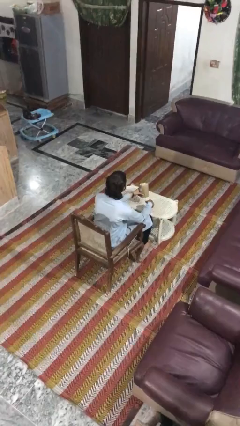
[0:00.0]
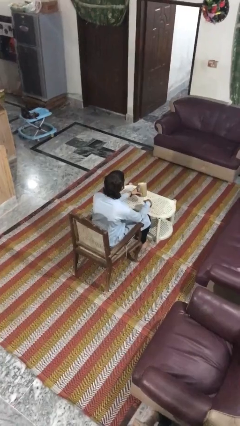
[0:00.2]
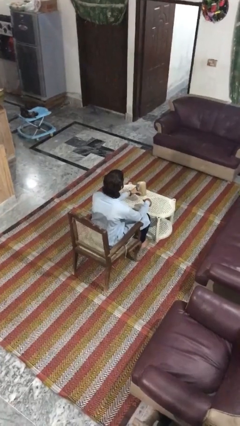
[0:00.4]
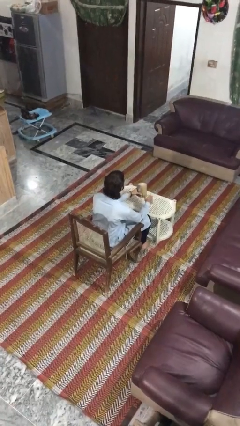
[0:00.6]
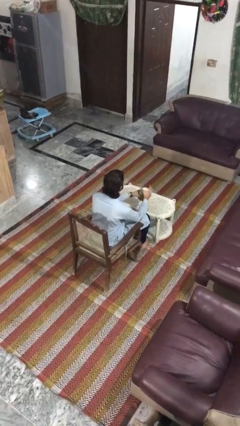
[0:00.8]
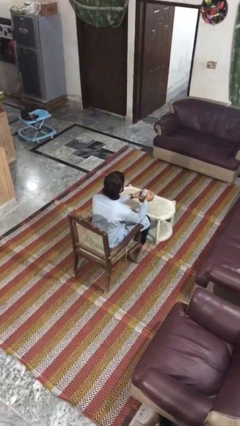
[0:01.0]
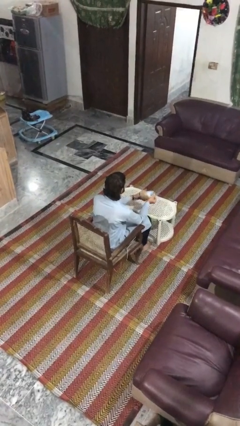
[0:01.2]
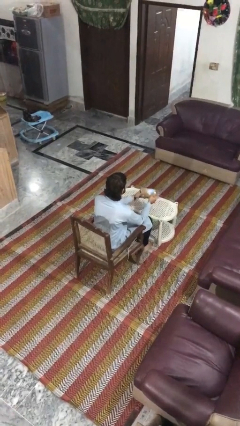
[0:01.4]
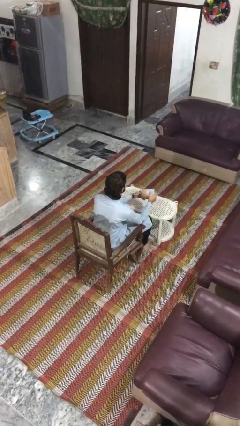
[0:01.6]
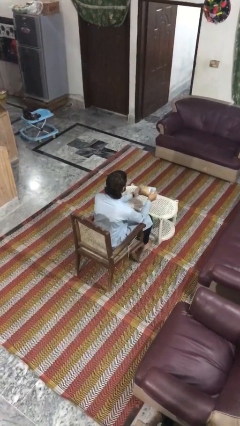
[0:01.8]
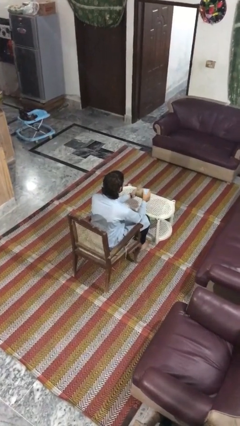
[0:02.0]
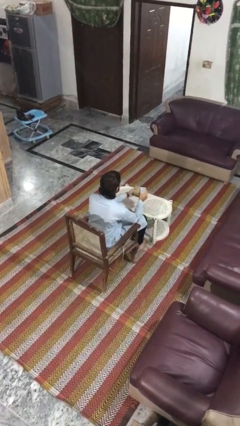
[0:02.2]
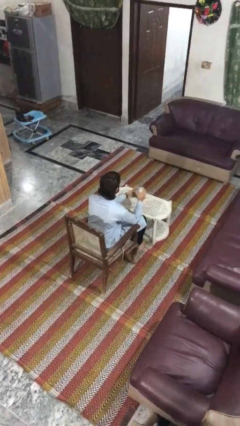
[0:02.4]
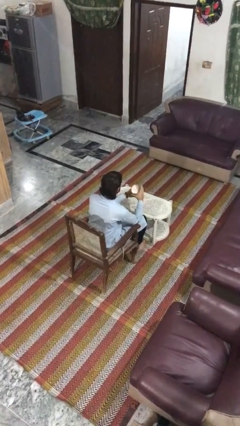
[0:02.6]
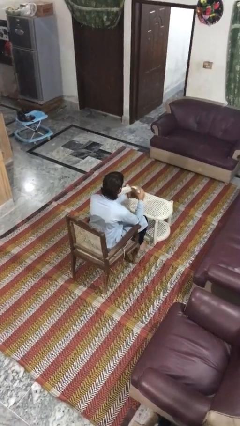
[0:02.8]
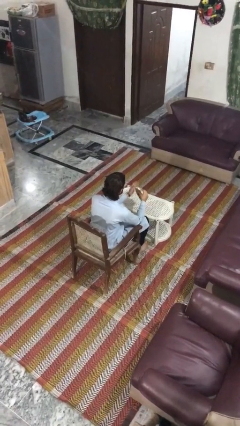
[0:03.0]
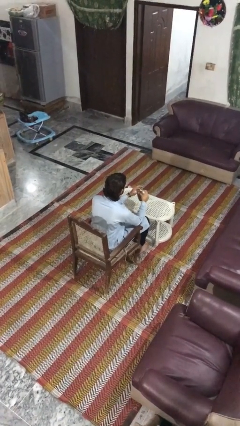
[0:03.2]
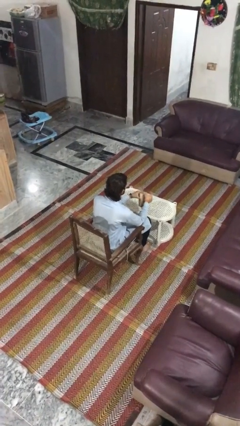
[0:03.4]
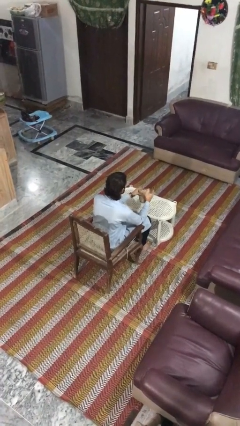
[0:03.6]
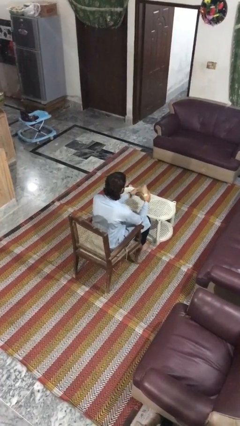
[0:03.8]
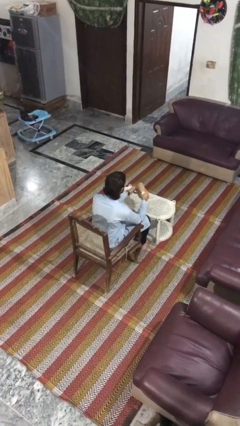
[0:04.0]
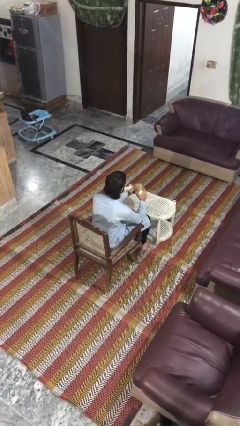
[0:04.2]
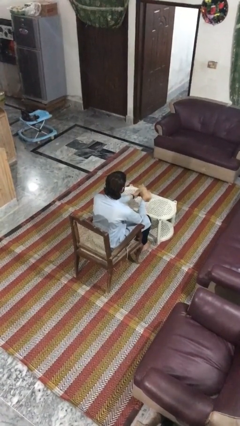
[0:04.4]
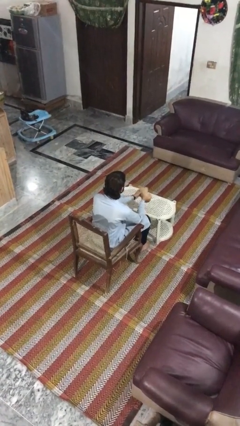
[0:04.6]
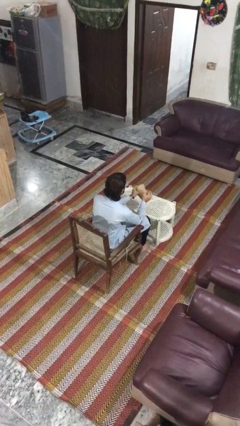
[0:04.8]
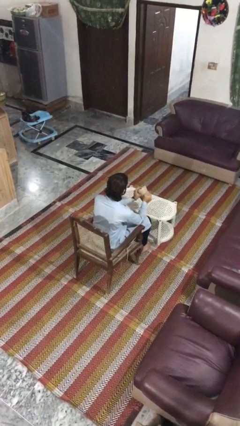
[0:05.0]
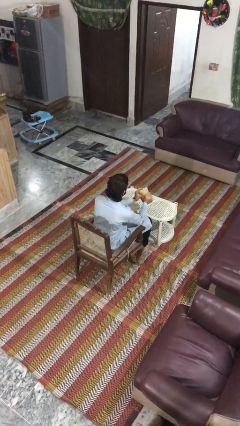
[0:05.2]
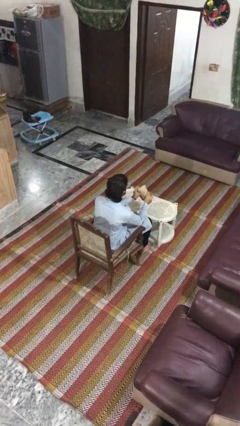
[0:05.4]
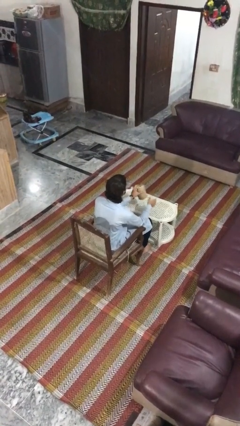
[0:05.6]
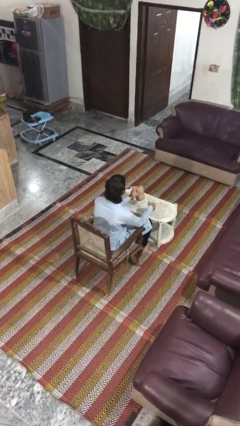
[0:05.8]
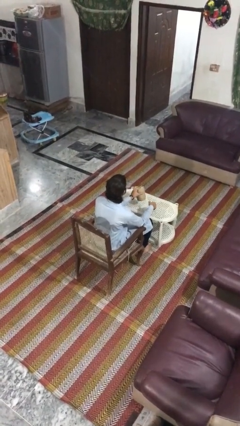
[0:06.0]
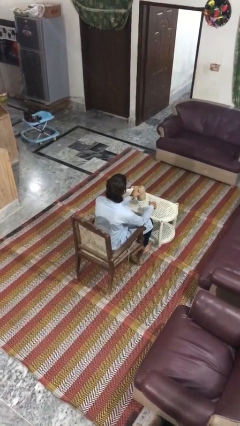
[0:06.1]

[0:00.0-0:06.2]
person squeezes object

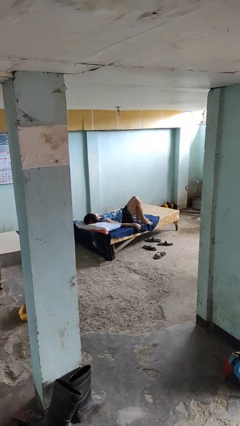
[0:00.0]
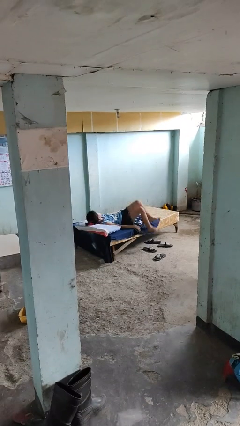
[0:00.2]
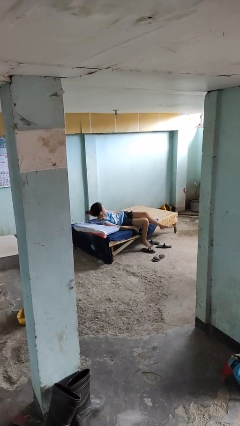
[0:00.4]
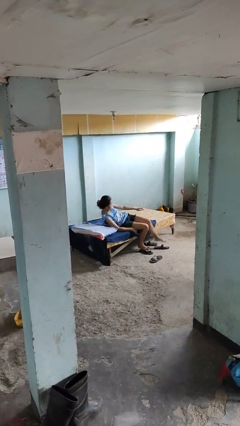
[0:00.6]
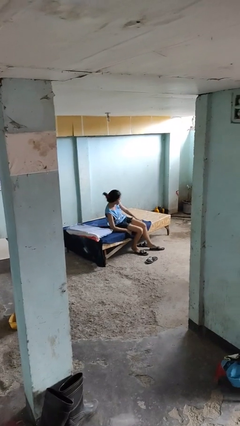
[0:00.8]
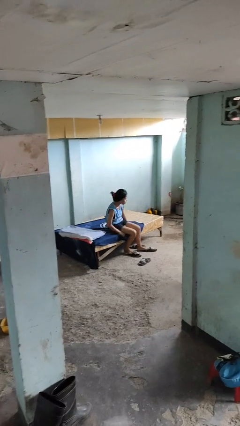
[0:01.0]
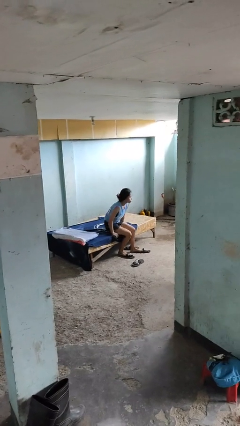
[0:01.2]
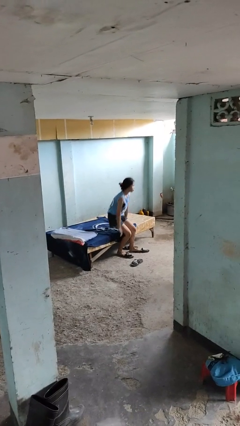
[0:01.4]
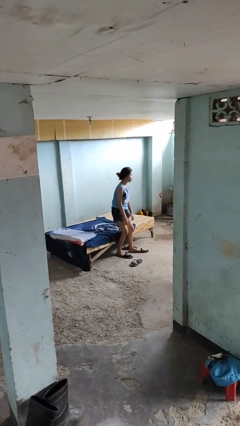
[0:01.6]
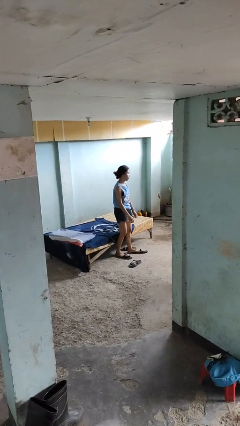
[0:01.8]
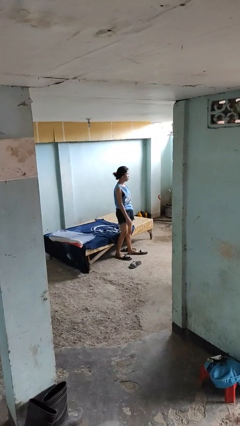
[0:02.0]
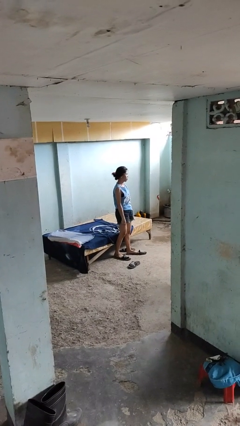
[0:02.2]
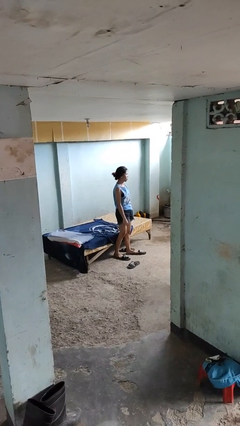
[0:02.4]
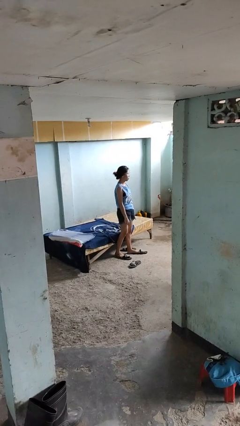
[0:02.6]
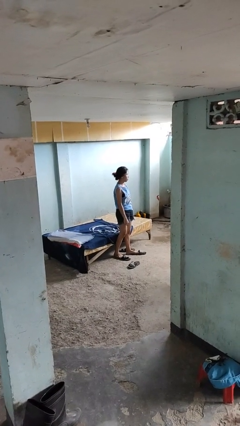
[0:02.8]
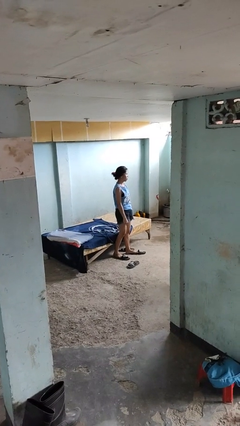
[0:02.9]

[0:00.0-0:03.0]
person stands up

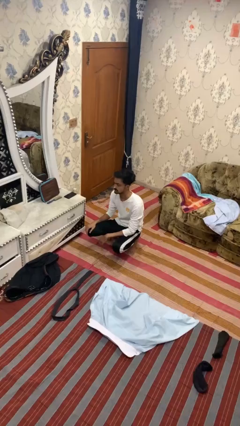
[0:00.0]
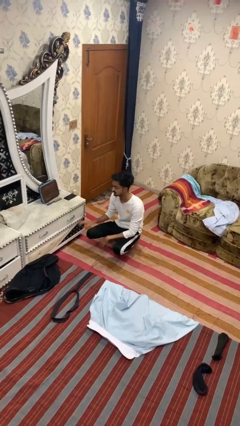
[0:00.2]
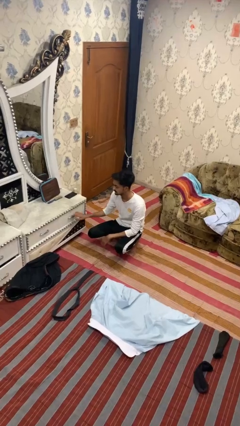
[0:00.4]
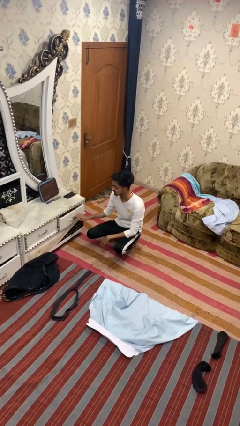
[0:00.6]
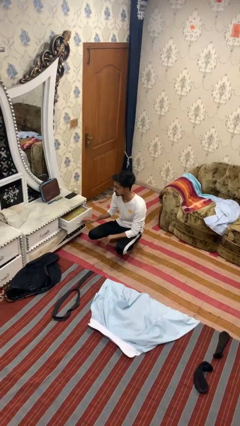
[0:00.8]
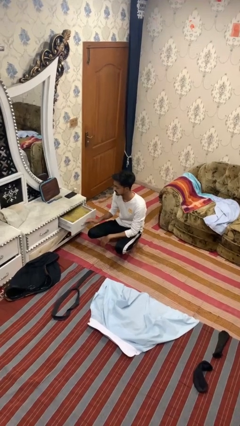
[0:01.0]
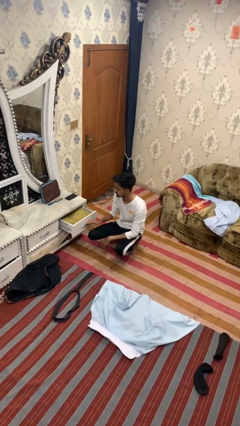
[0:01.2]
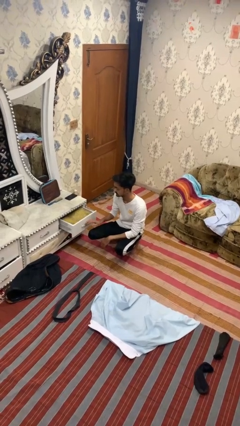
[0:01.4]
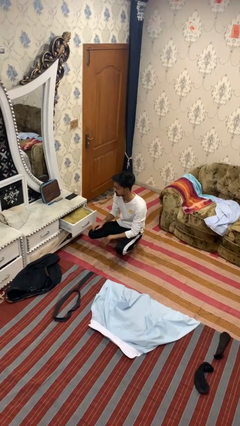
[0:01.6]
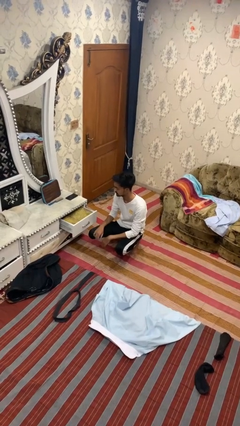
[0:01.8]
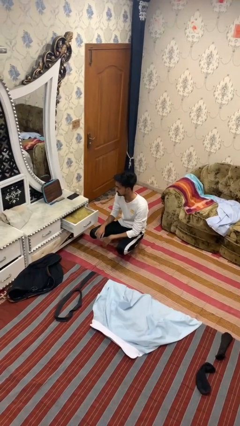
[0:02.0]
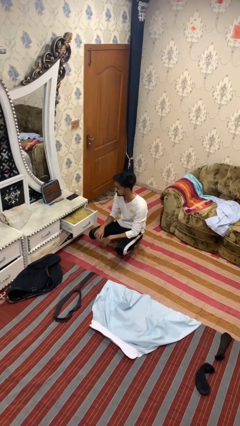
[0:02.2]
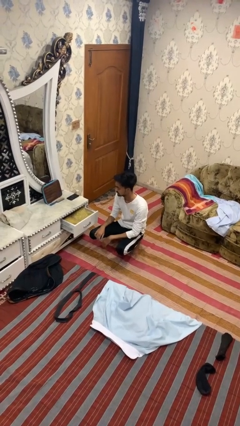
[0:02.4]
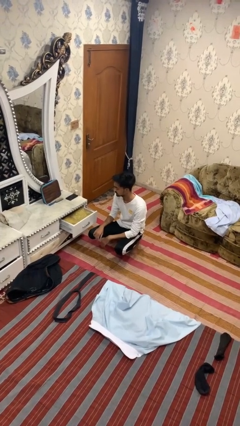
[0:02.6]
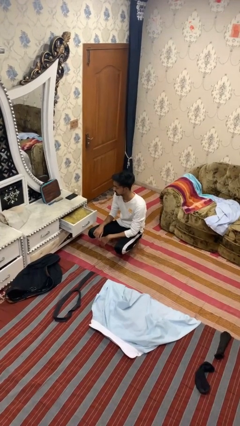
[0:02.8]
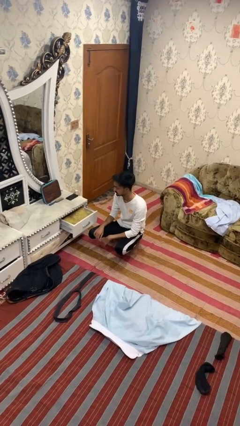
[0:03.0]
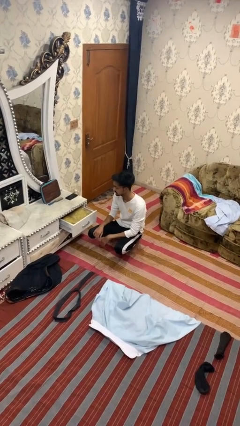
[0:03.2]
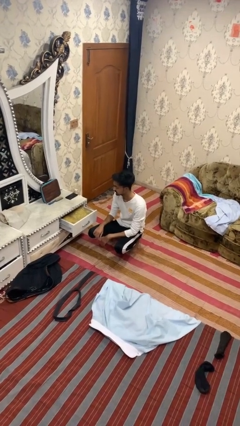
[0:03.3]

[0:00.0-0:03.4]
person opens dresser drawer

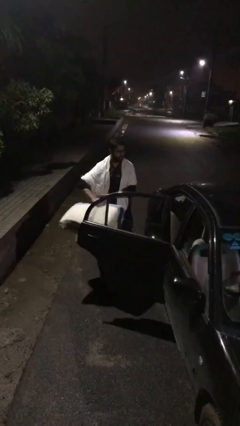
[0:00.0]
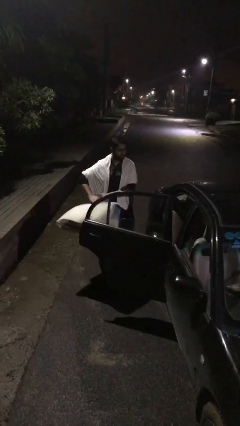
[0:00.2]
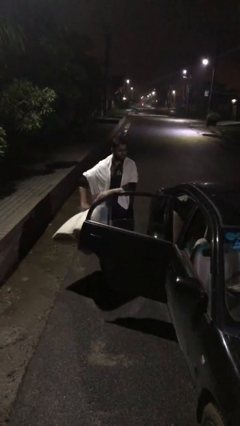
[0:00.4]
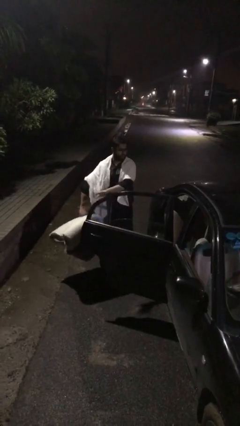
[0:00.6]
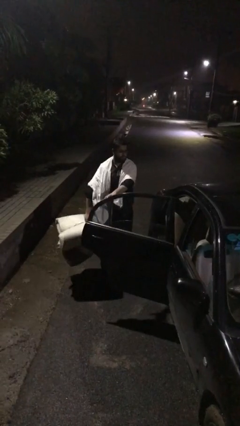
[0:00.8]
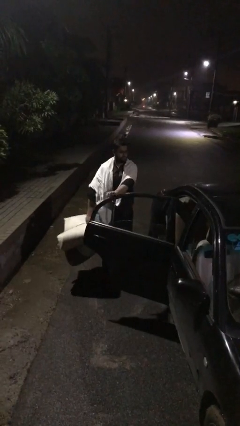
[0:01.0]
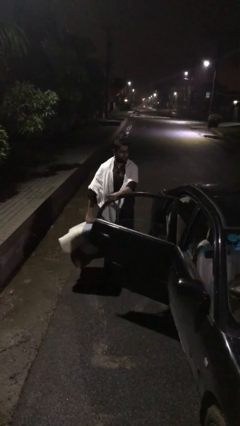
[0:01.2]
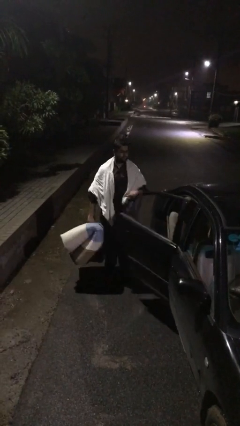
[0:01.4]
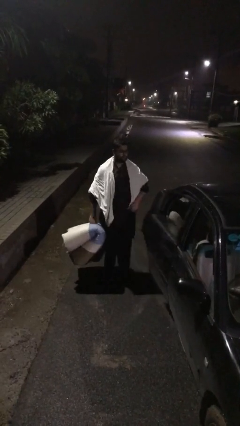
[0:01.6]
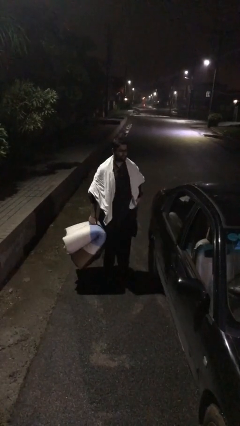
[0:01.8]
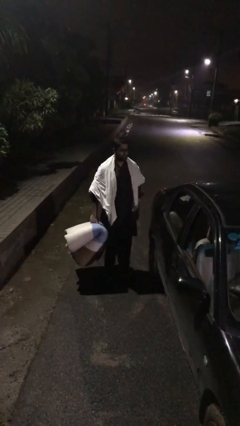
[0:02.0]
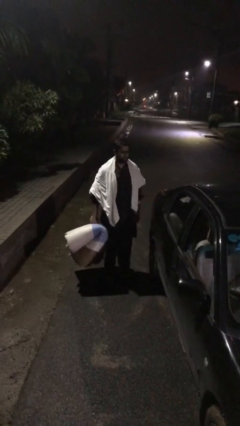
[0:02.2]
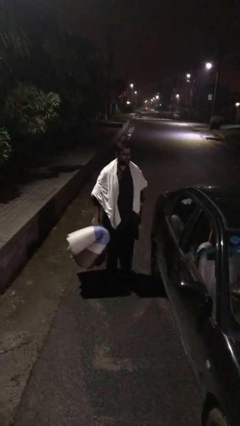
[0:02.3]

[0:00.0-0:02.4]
person closes car door

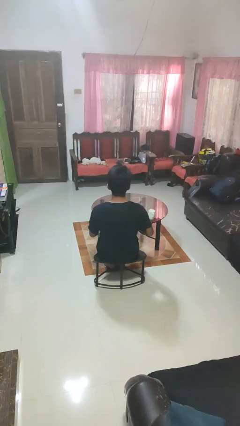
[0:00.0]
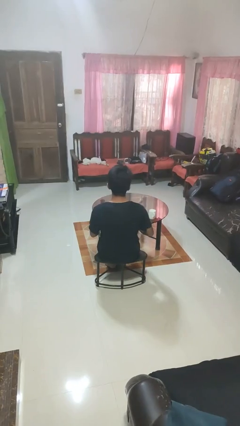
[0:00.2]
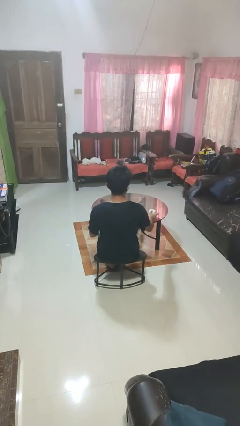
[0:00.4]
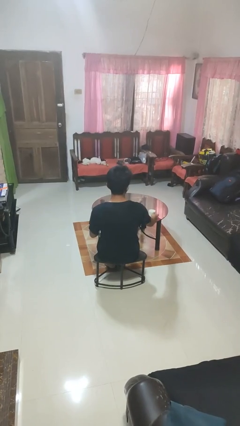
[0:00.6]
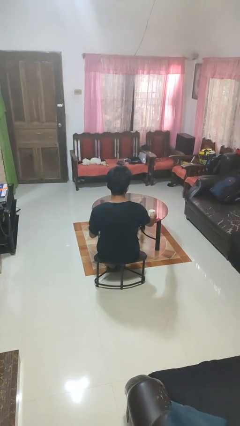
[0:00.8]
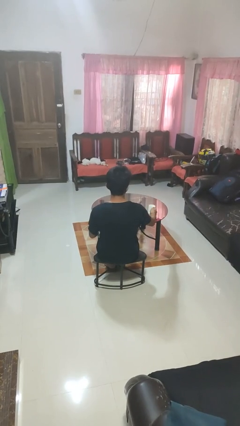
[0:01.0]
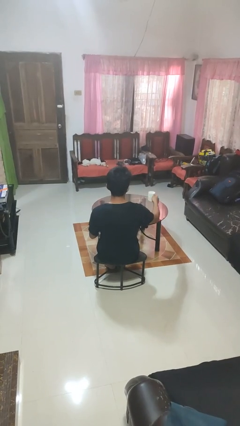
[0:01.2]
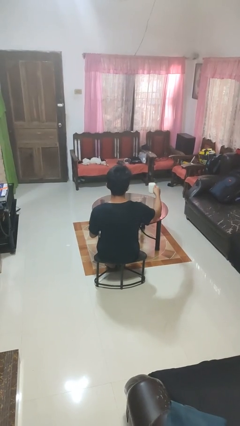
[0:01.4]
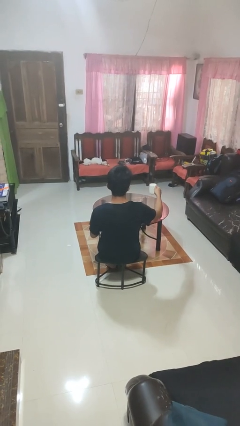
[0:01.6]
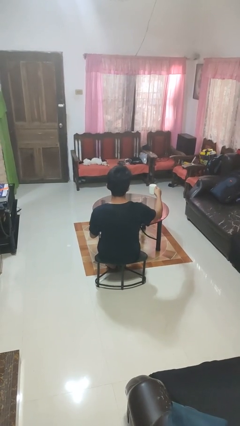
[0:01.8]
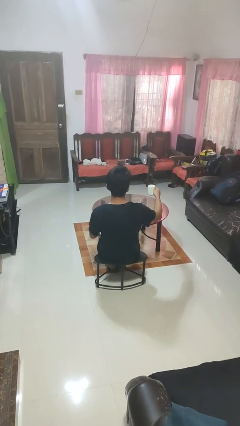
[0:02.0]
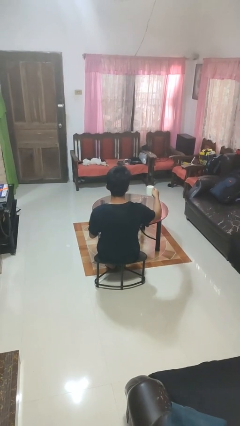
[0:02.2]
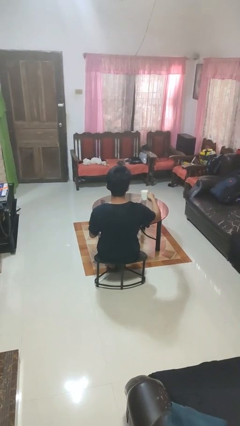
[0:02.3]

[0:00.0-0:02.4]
person picks up object from table
